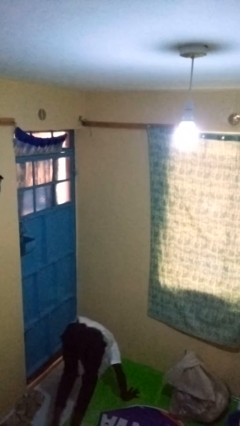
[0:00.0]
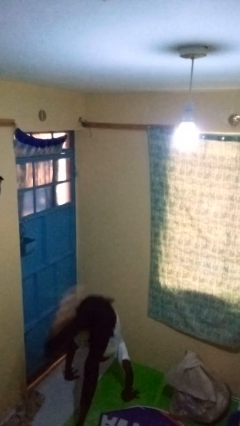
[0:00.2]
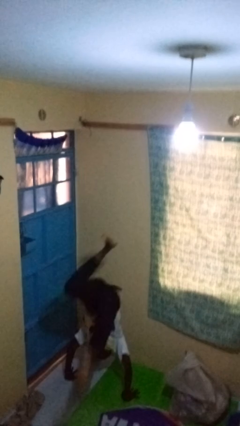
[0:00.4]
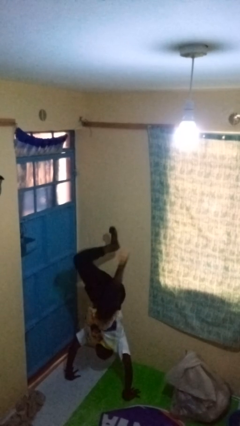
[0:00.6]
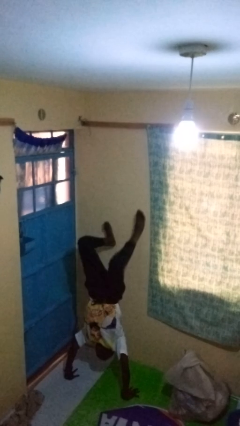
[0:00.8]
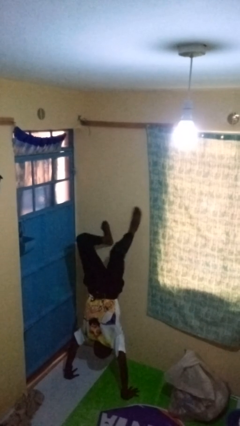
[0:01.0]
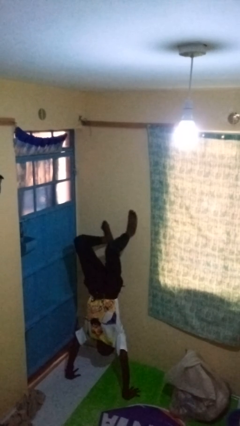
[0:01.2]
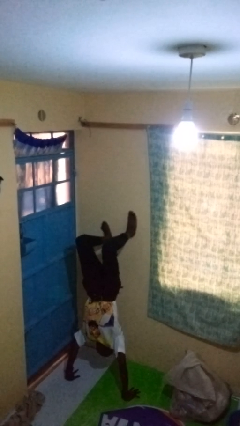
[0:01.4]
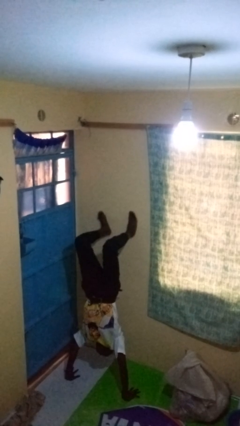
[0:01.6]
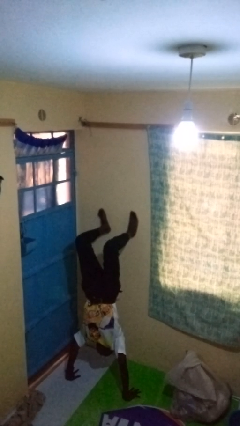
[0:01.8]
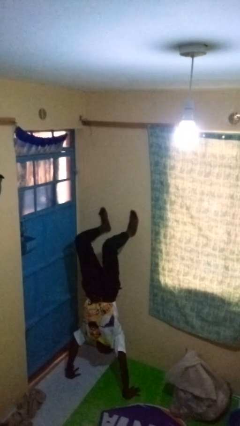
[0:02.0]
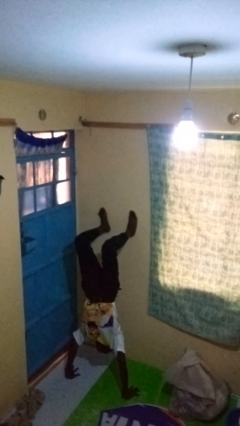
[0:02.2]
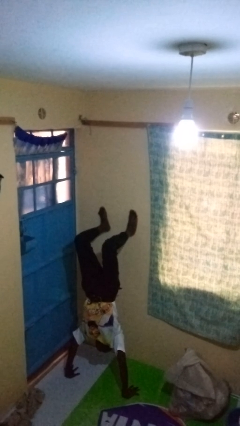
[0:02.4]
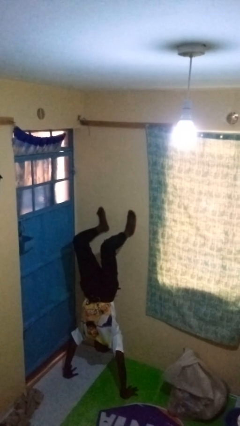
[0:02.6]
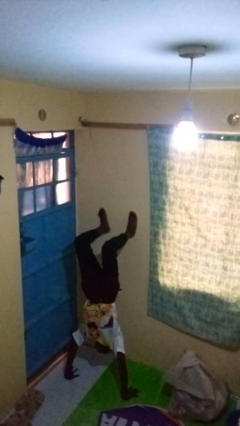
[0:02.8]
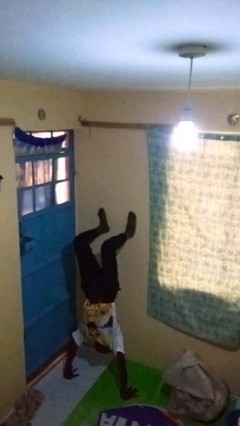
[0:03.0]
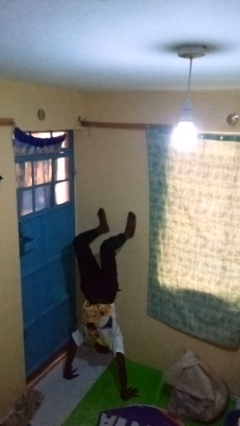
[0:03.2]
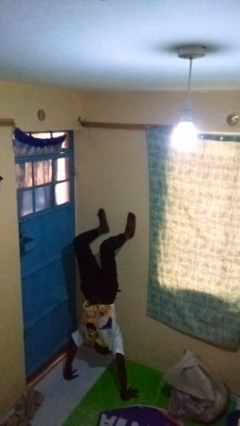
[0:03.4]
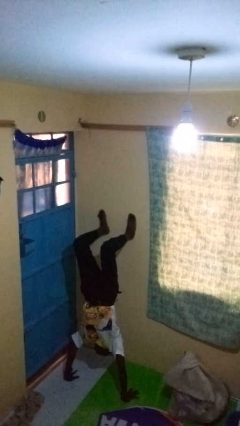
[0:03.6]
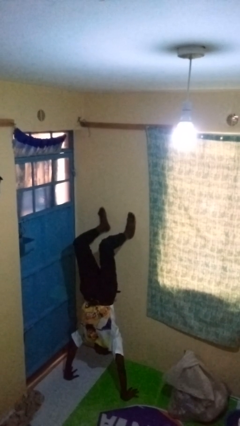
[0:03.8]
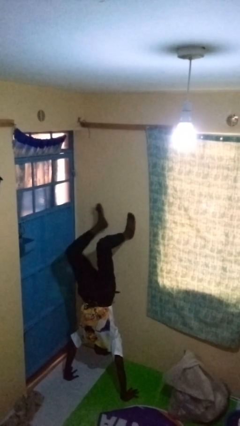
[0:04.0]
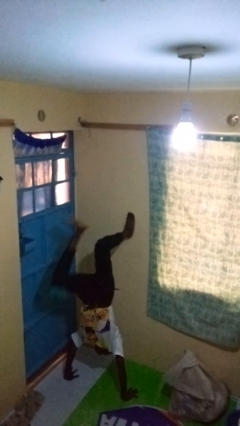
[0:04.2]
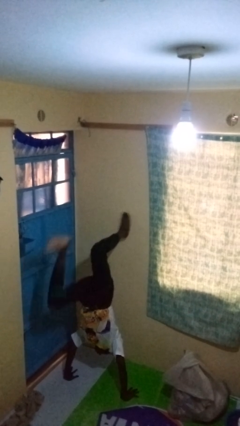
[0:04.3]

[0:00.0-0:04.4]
person handstand

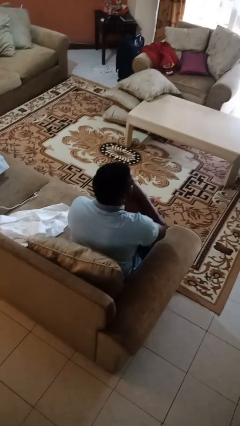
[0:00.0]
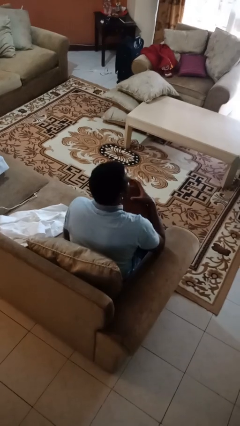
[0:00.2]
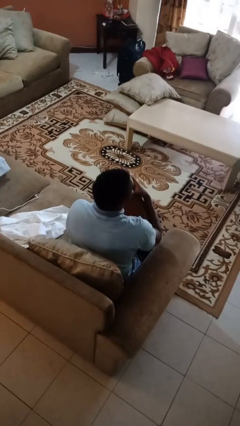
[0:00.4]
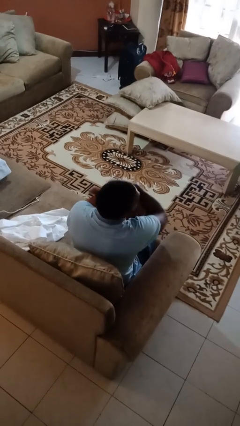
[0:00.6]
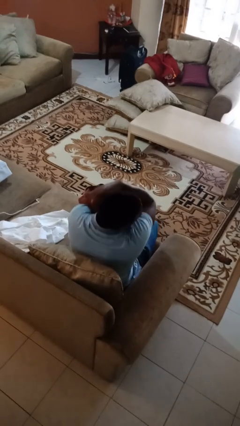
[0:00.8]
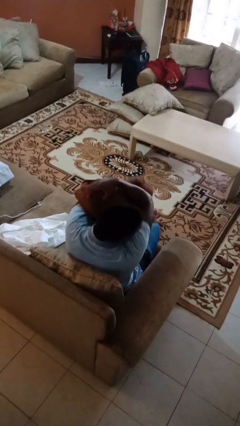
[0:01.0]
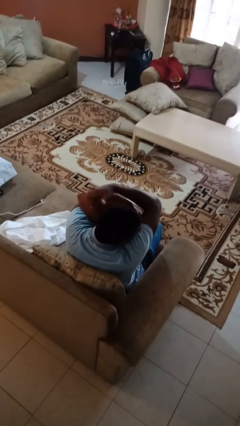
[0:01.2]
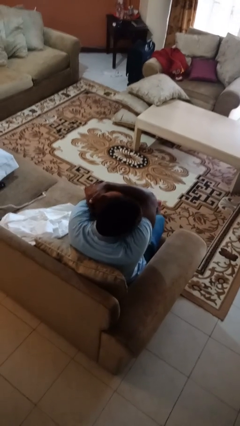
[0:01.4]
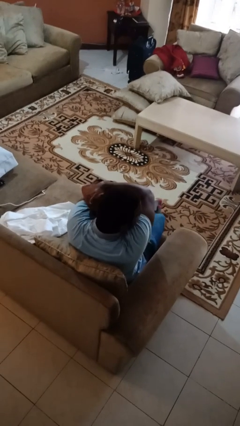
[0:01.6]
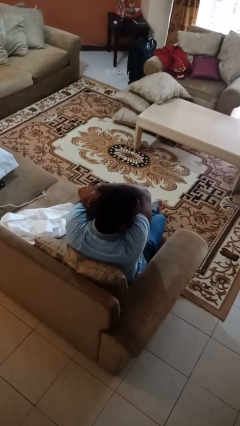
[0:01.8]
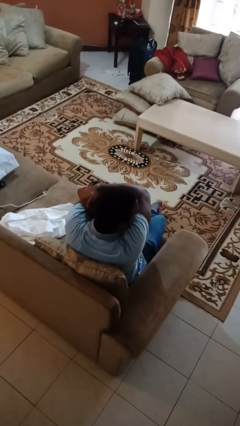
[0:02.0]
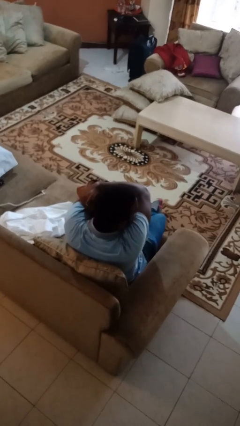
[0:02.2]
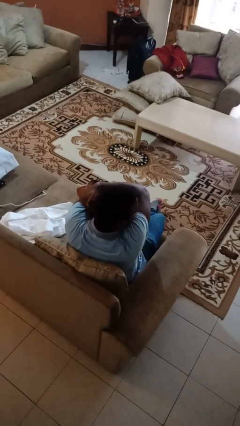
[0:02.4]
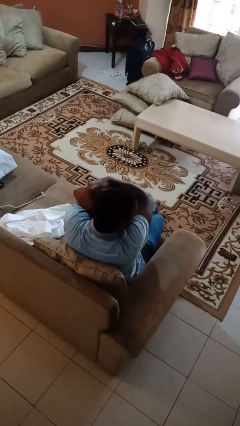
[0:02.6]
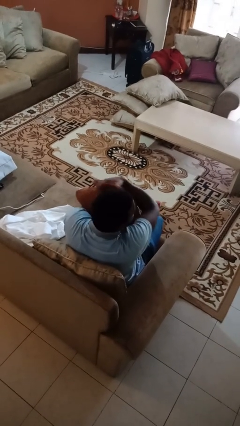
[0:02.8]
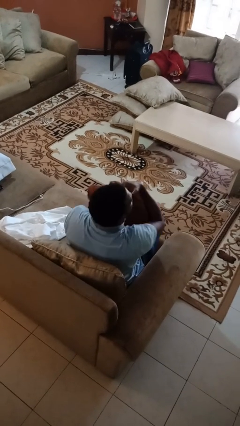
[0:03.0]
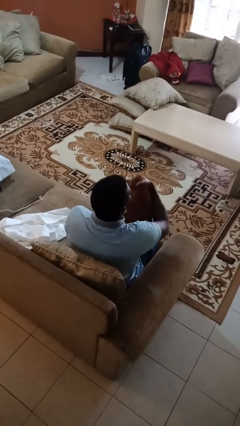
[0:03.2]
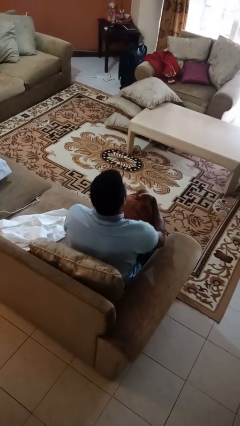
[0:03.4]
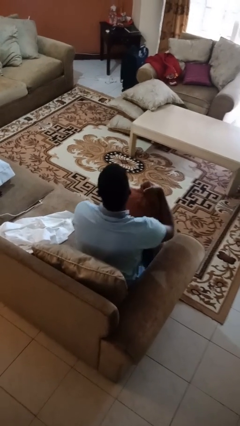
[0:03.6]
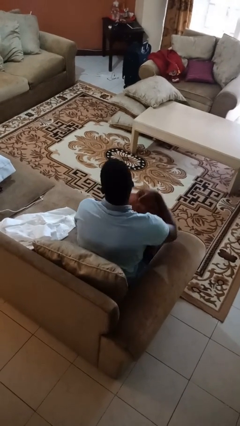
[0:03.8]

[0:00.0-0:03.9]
person hugs stuffed animal

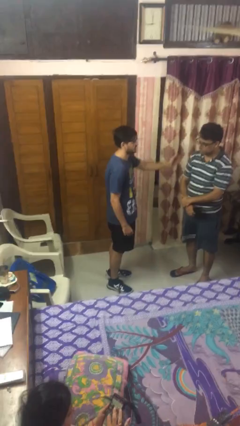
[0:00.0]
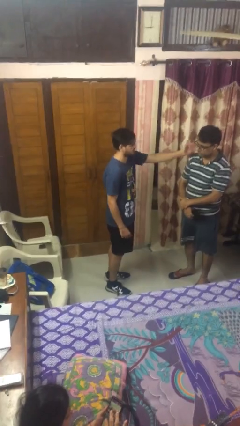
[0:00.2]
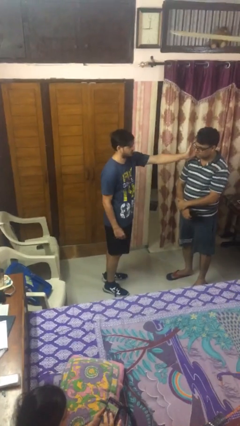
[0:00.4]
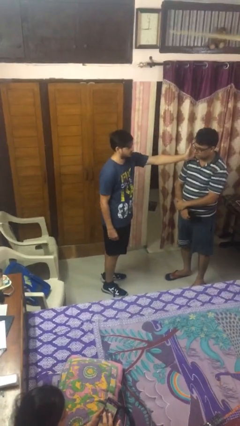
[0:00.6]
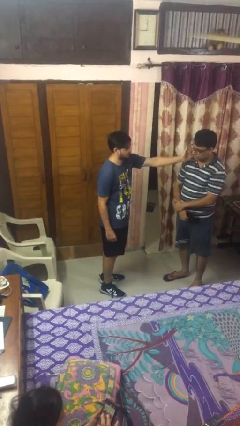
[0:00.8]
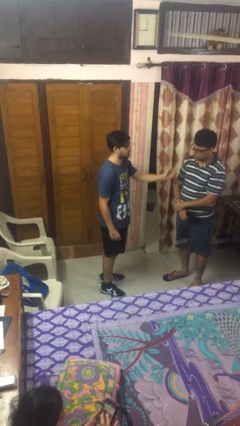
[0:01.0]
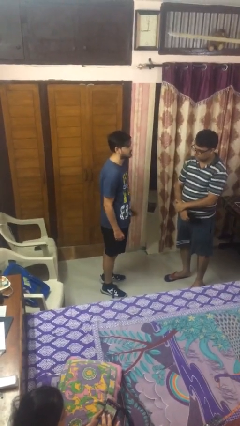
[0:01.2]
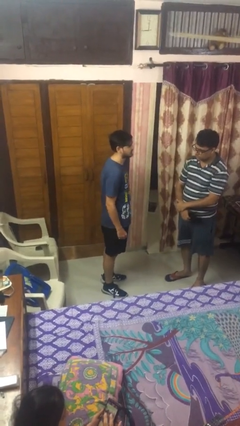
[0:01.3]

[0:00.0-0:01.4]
person touches face of person

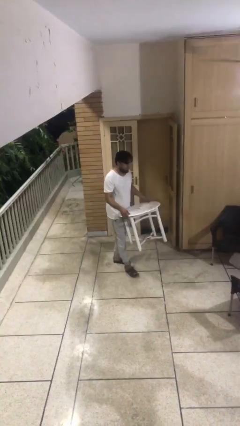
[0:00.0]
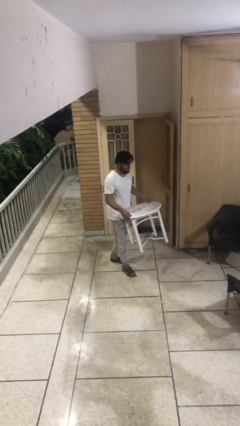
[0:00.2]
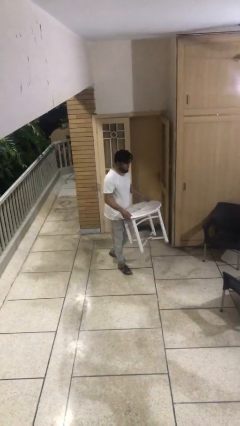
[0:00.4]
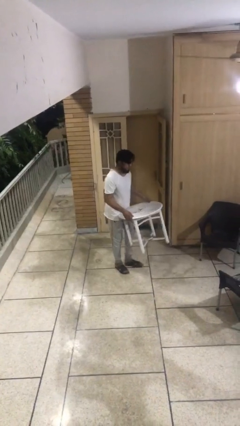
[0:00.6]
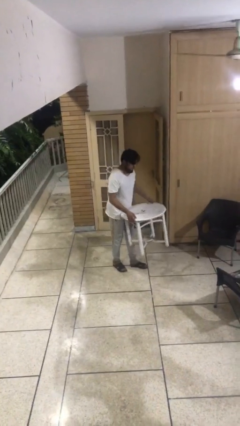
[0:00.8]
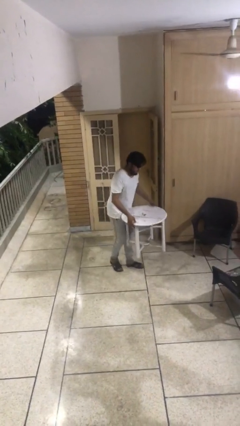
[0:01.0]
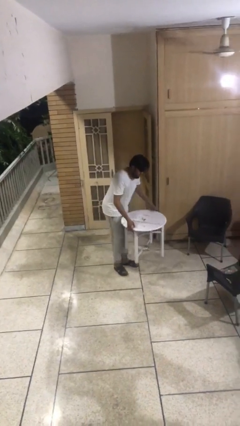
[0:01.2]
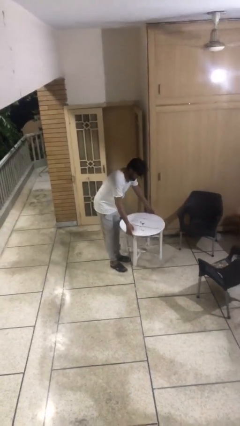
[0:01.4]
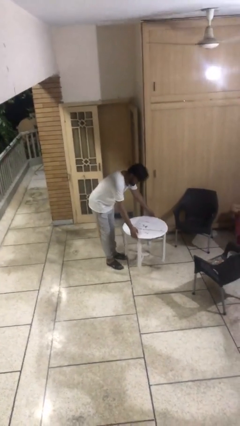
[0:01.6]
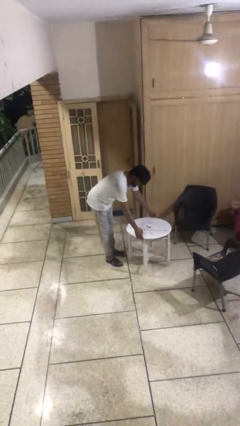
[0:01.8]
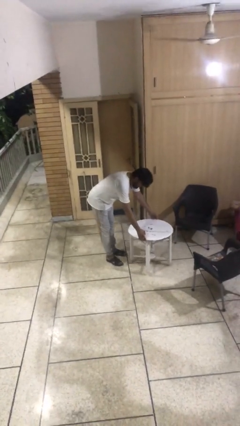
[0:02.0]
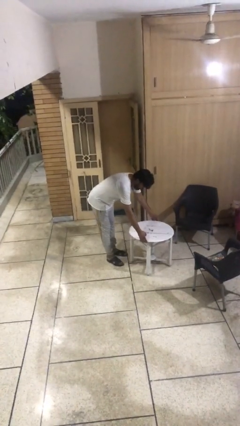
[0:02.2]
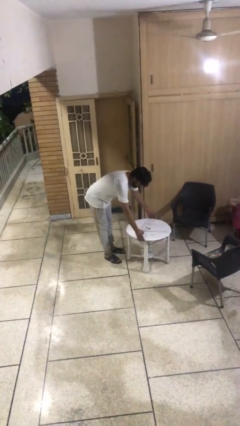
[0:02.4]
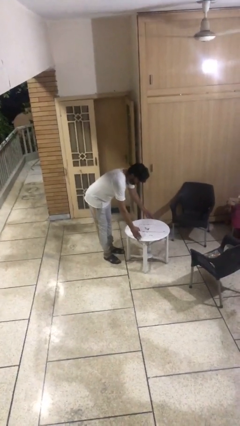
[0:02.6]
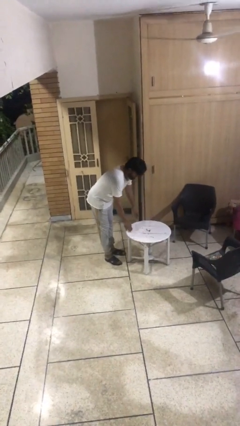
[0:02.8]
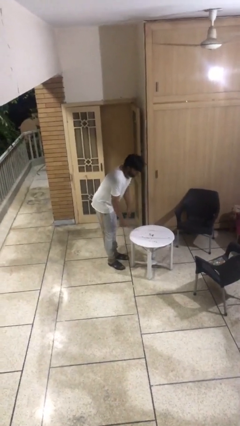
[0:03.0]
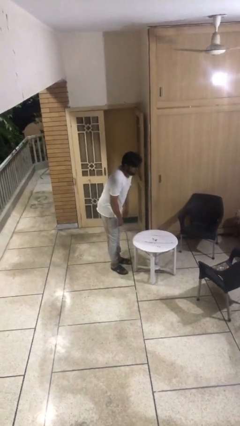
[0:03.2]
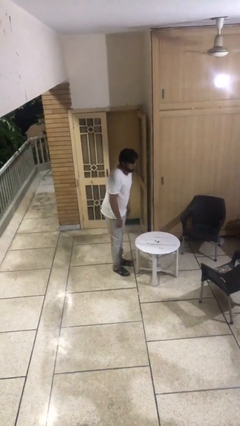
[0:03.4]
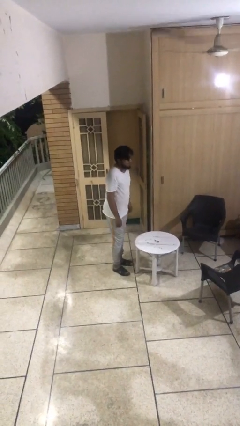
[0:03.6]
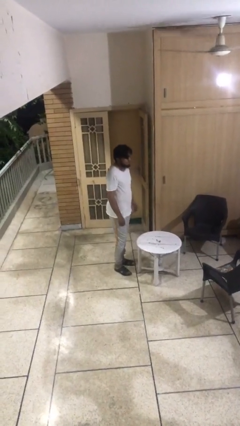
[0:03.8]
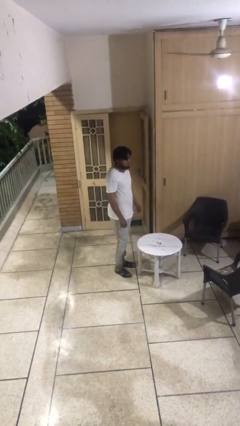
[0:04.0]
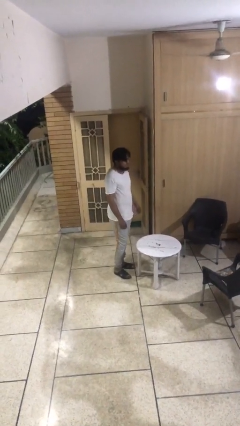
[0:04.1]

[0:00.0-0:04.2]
person puts down object on floor

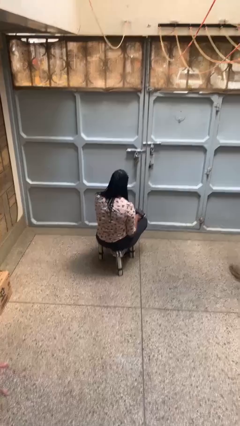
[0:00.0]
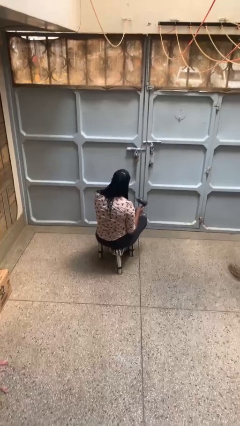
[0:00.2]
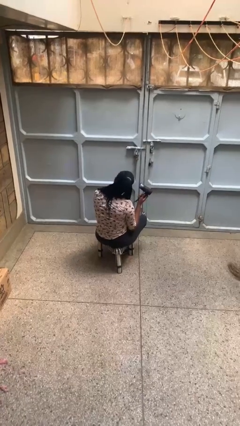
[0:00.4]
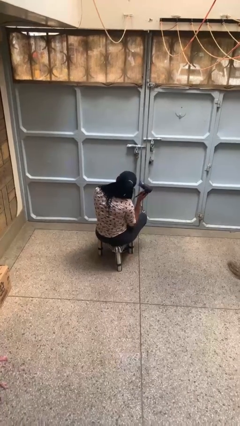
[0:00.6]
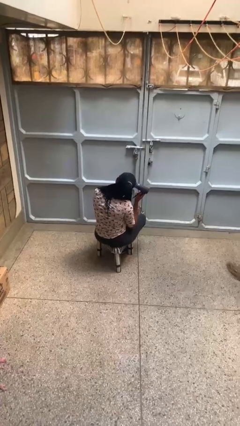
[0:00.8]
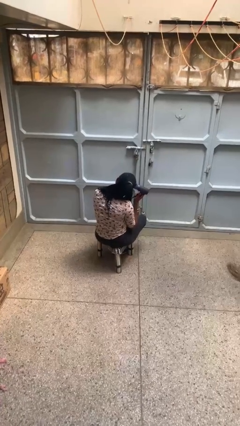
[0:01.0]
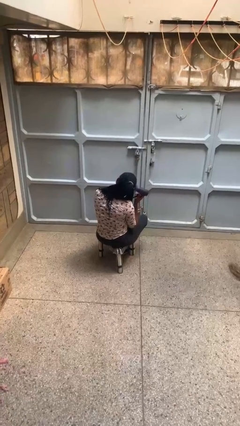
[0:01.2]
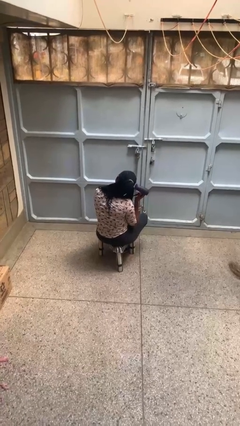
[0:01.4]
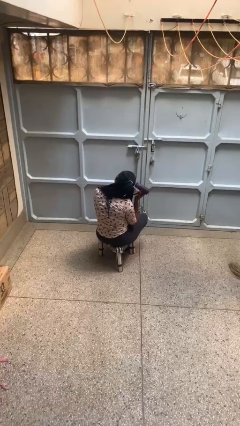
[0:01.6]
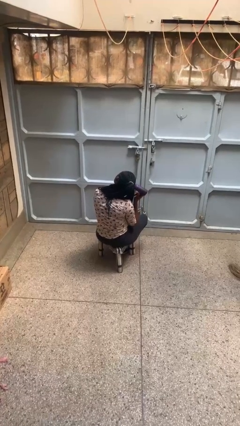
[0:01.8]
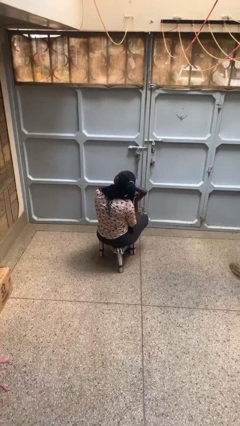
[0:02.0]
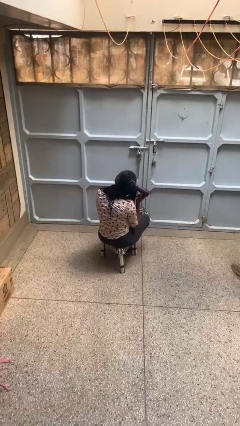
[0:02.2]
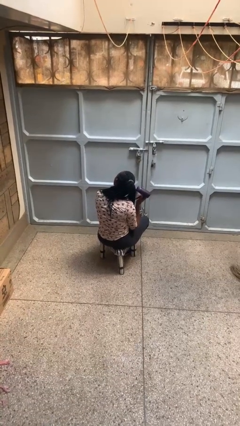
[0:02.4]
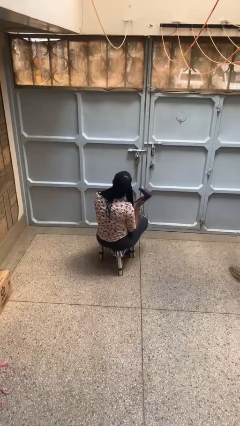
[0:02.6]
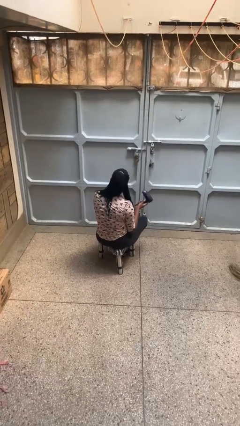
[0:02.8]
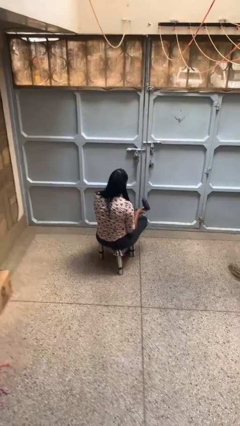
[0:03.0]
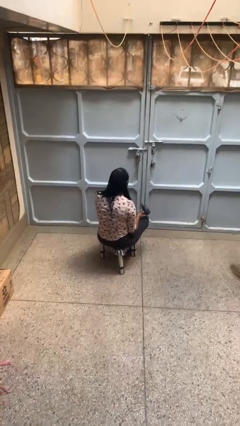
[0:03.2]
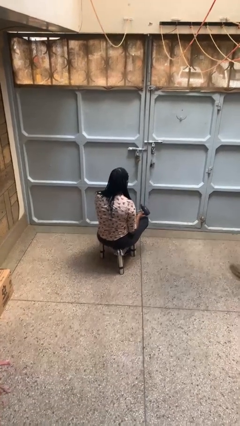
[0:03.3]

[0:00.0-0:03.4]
person dries hair with hairdryer

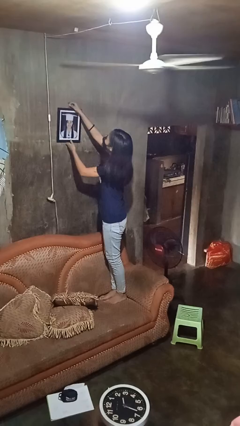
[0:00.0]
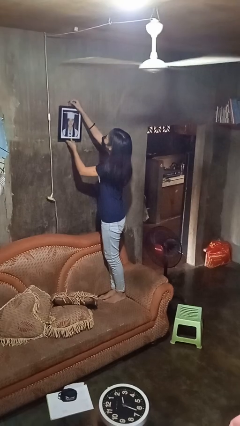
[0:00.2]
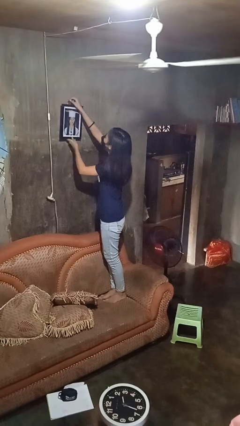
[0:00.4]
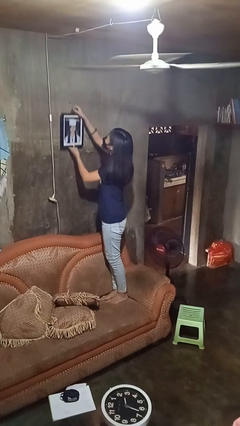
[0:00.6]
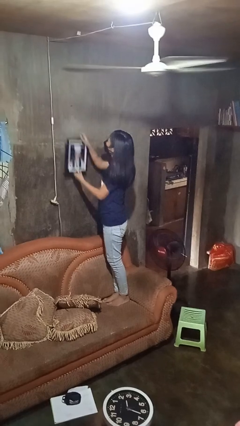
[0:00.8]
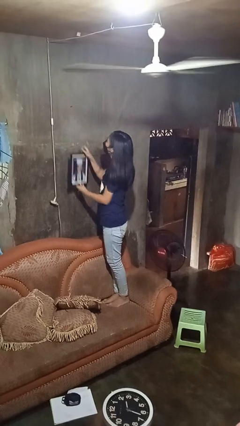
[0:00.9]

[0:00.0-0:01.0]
person takes down picture frame
